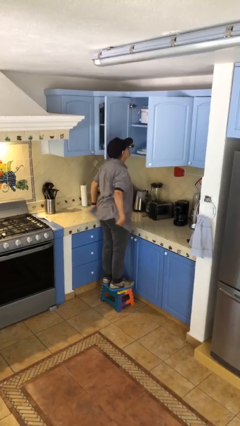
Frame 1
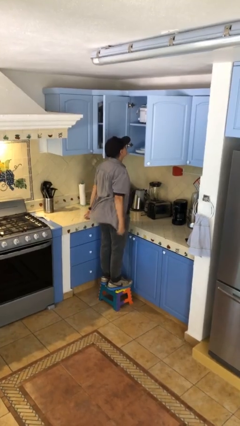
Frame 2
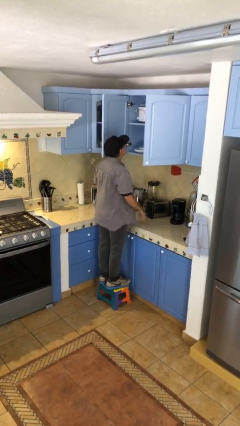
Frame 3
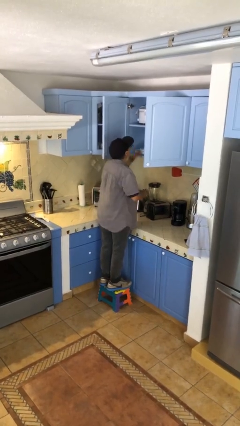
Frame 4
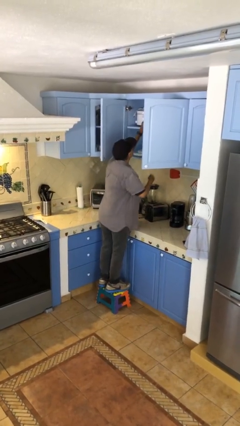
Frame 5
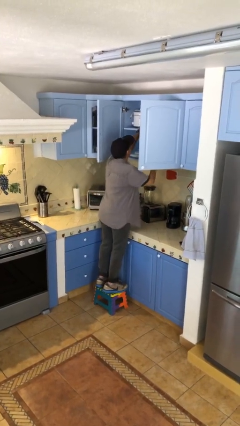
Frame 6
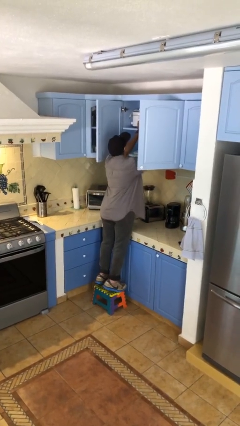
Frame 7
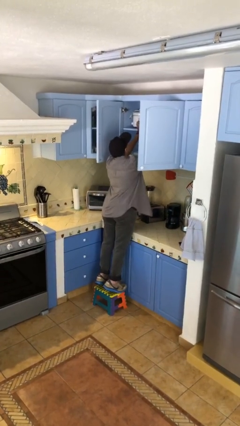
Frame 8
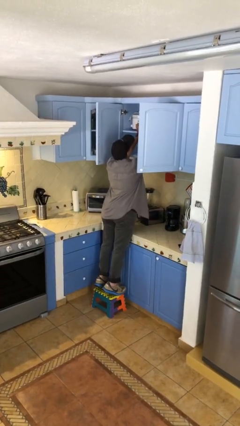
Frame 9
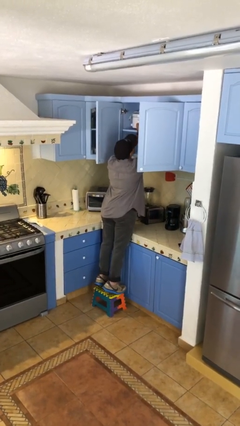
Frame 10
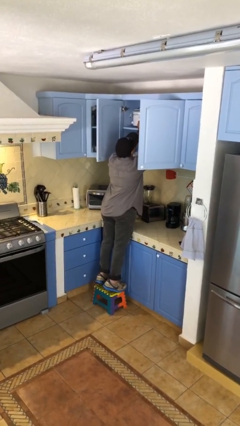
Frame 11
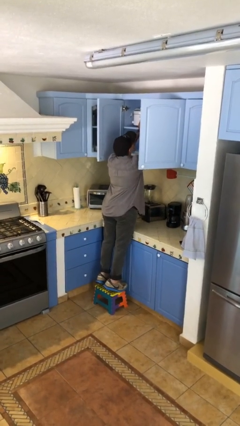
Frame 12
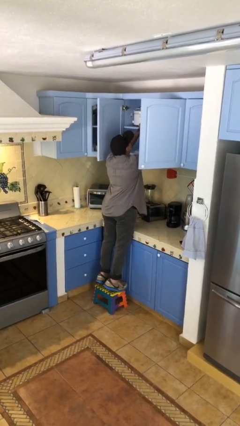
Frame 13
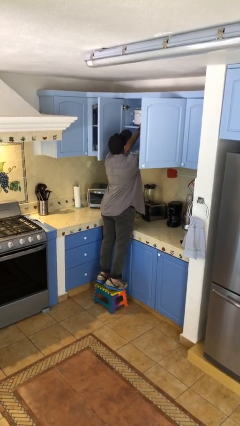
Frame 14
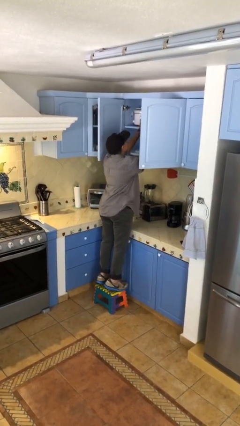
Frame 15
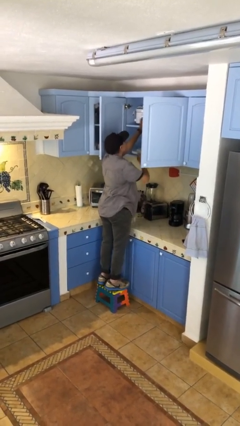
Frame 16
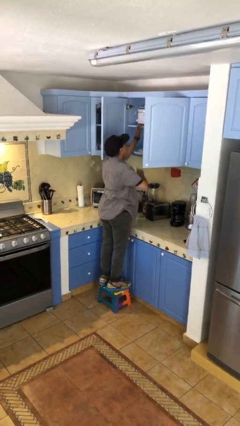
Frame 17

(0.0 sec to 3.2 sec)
person searches in cabinet

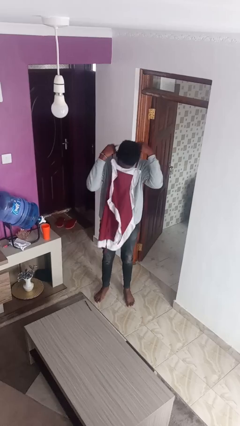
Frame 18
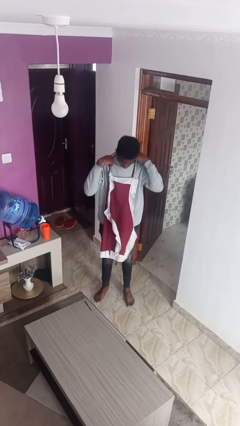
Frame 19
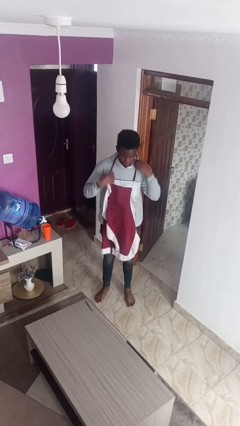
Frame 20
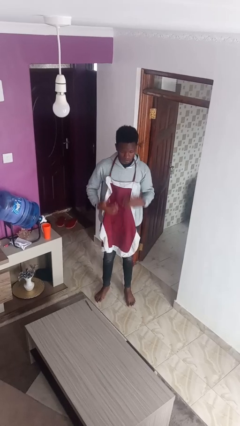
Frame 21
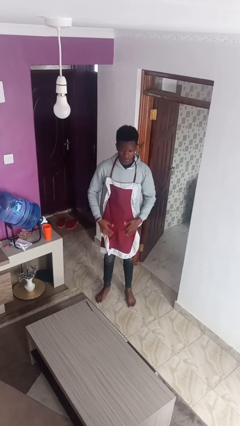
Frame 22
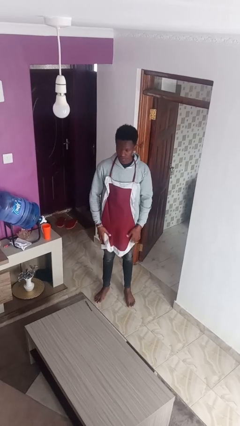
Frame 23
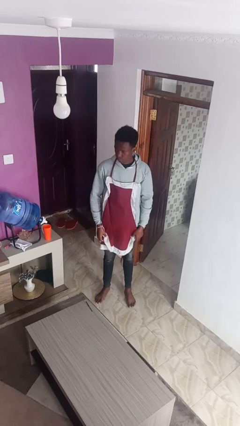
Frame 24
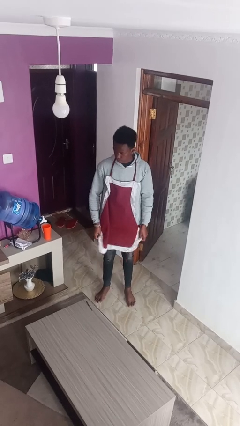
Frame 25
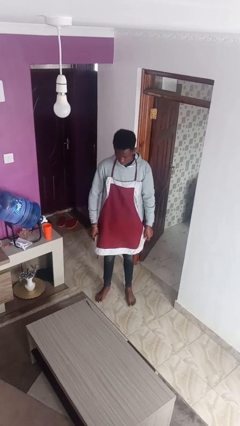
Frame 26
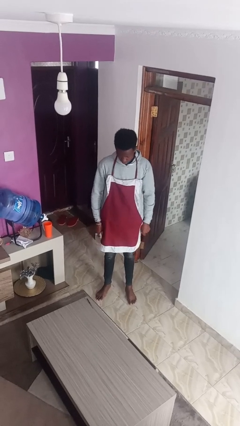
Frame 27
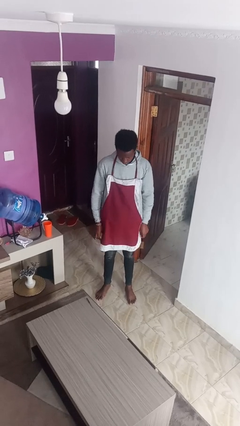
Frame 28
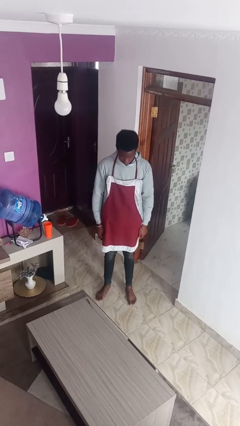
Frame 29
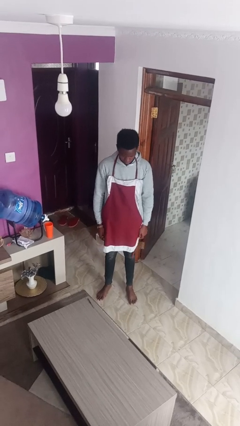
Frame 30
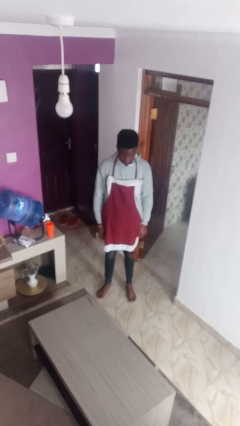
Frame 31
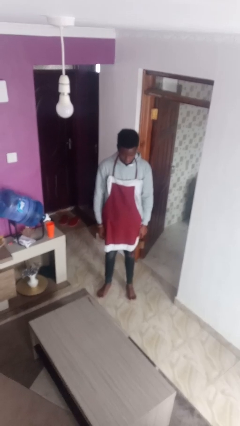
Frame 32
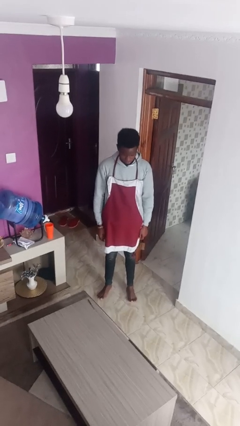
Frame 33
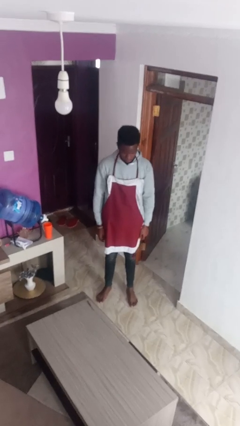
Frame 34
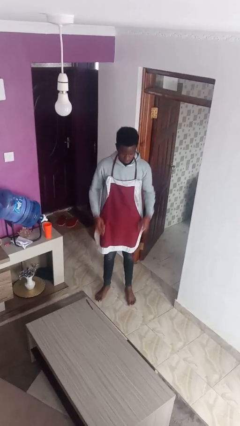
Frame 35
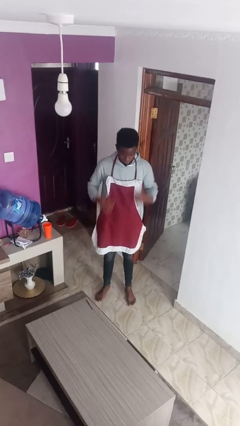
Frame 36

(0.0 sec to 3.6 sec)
person puts on apron

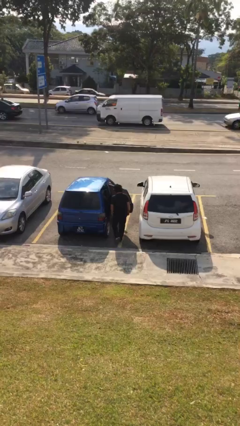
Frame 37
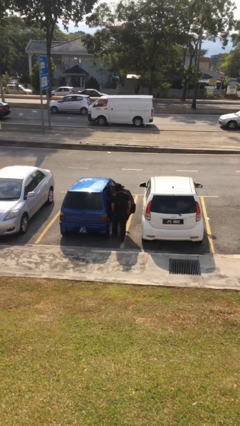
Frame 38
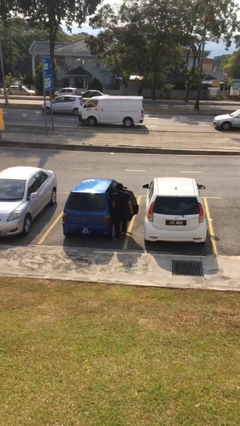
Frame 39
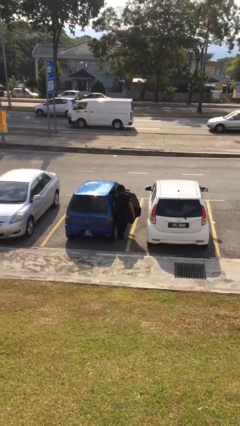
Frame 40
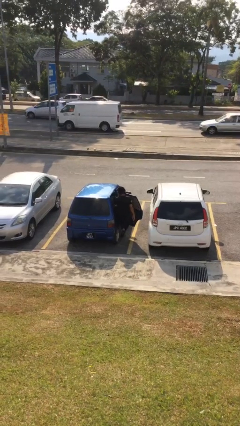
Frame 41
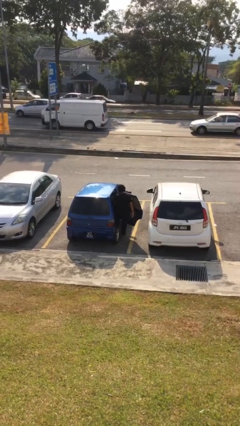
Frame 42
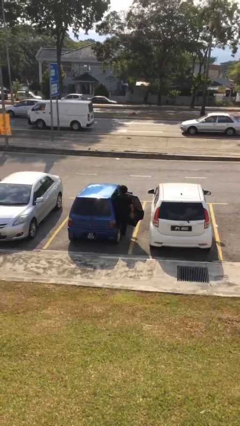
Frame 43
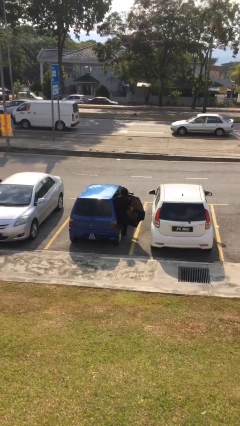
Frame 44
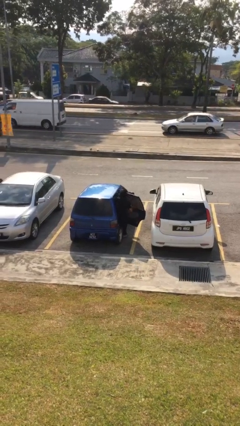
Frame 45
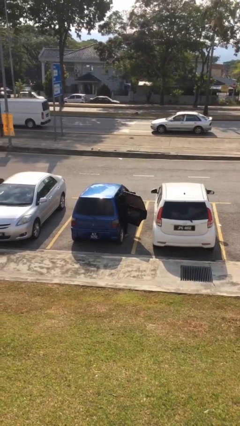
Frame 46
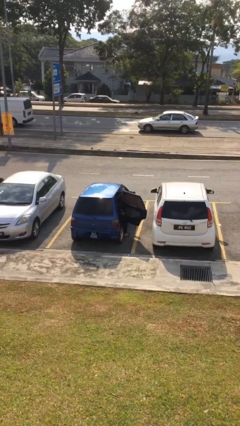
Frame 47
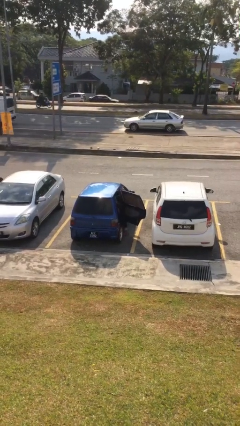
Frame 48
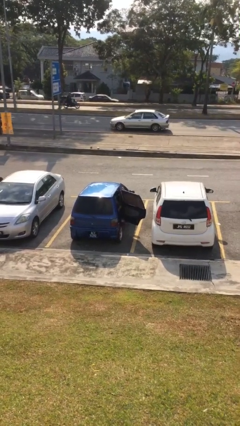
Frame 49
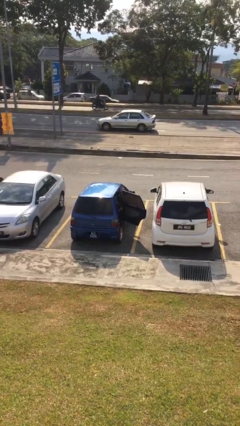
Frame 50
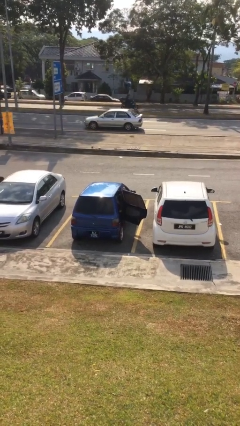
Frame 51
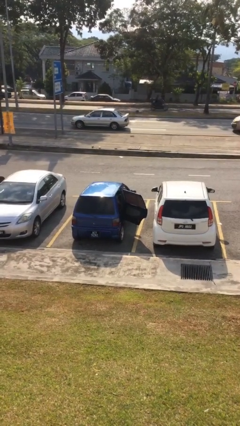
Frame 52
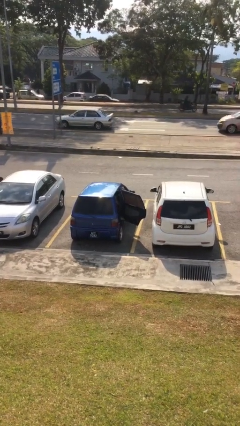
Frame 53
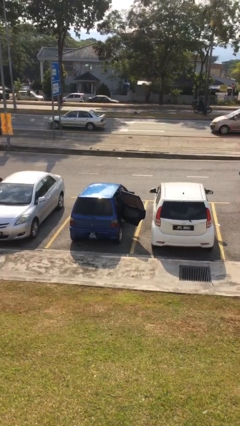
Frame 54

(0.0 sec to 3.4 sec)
person enters car

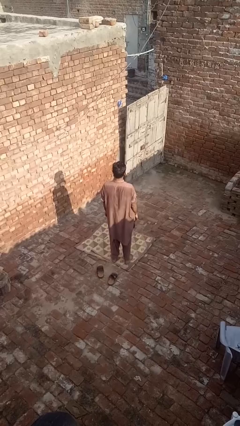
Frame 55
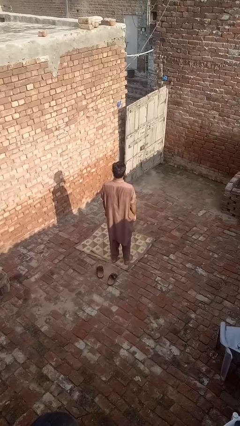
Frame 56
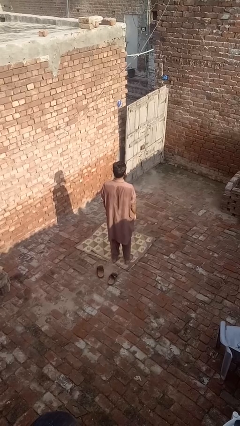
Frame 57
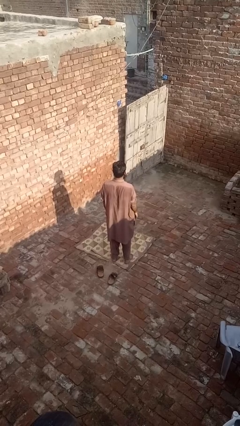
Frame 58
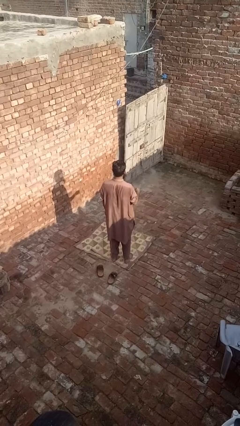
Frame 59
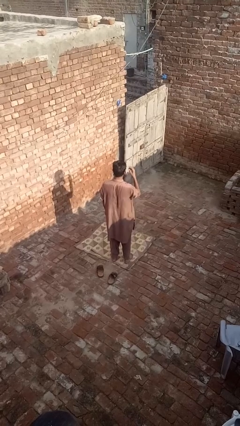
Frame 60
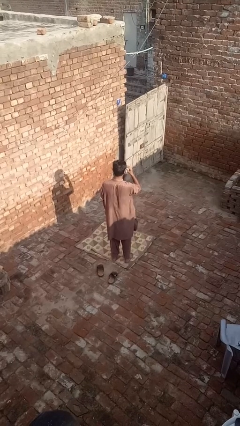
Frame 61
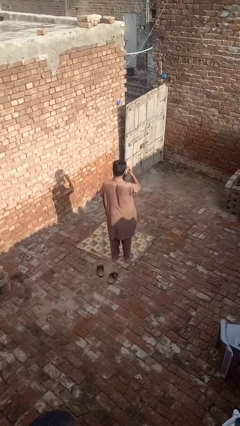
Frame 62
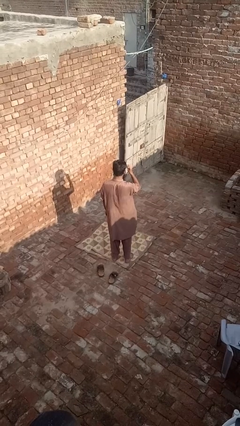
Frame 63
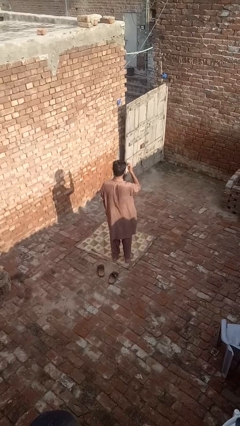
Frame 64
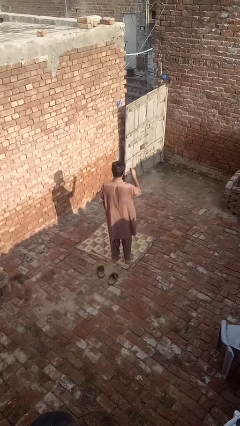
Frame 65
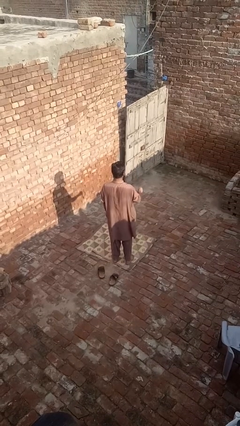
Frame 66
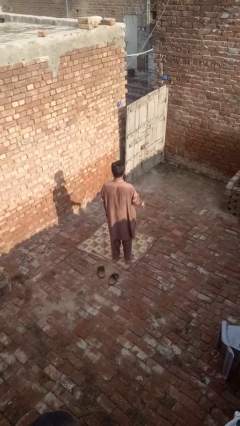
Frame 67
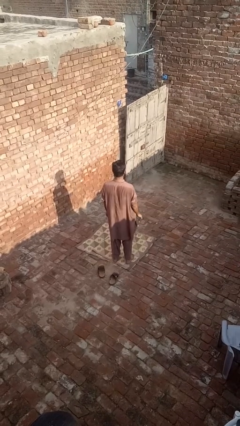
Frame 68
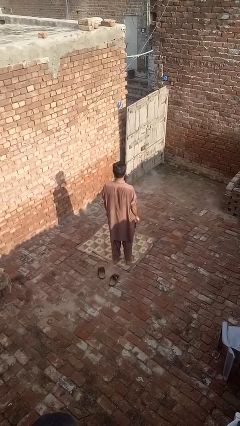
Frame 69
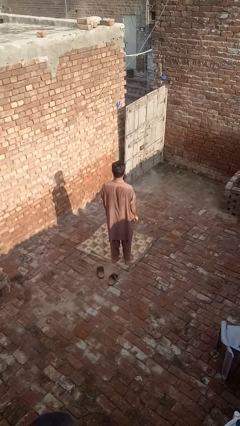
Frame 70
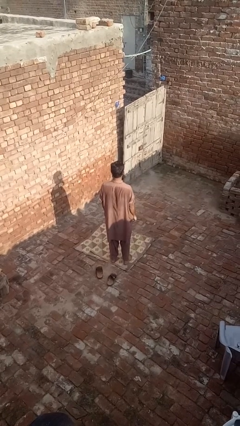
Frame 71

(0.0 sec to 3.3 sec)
person takes off glasses

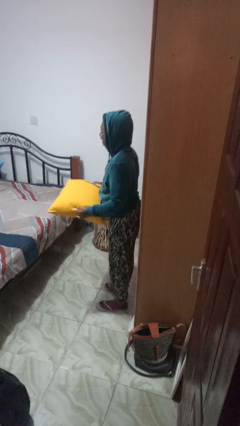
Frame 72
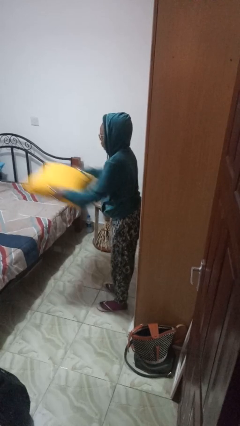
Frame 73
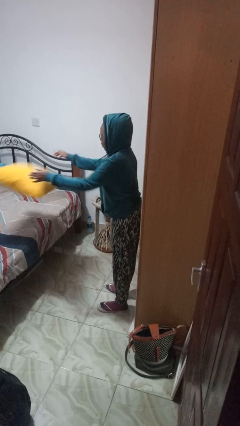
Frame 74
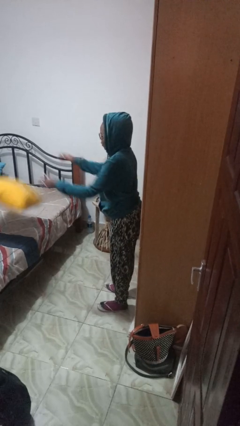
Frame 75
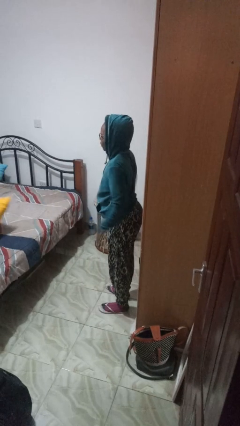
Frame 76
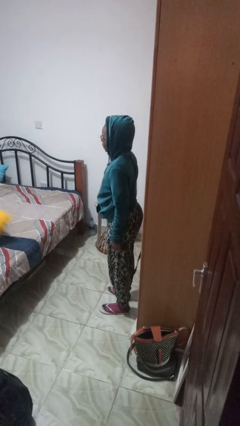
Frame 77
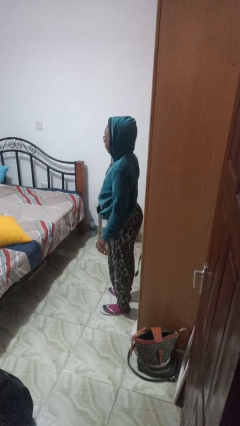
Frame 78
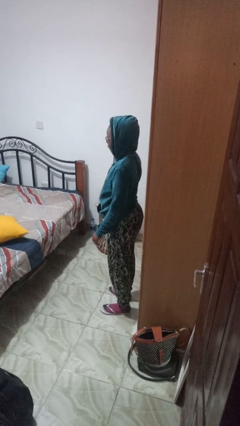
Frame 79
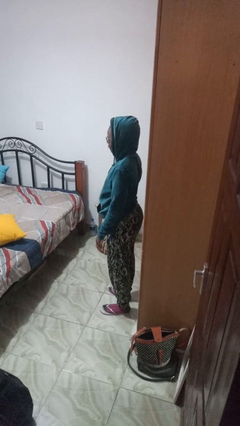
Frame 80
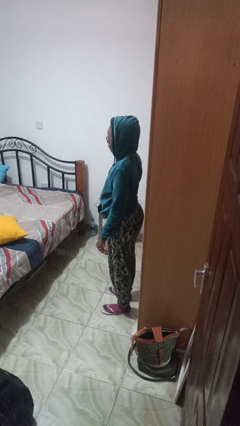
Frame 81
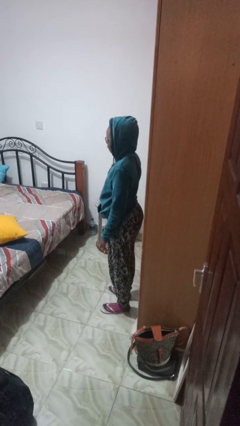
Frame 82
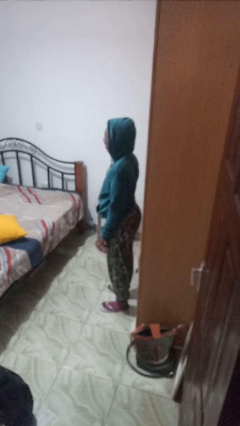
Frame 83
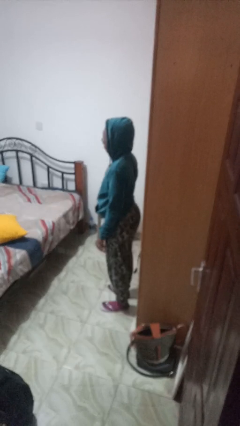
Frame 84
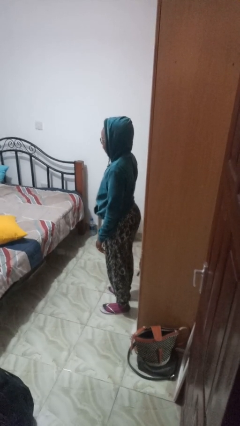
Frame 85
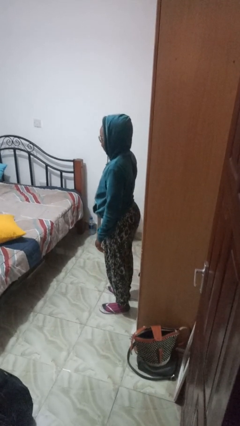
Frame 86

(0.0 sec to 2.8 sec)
person throws object on bed

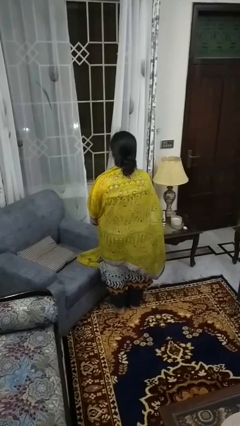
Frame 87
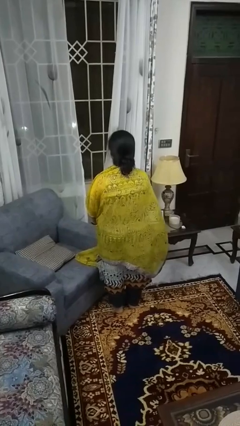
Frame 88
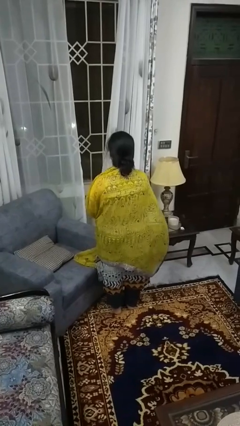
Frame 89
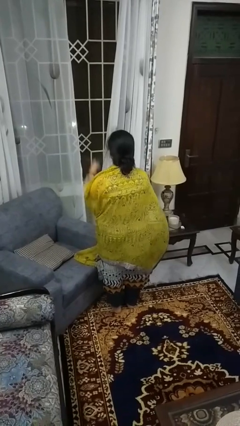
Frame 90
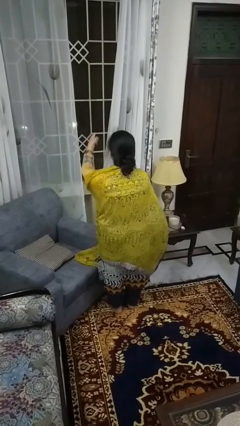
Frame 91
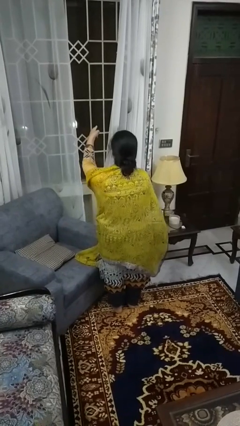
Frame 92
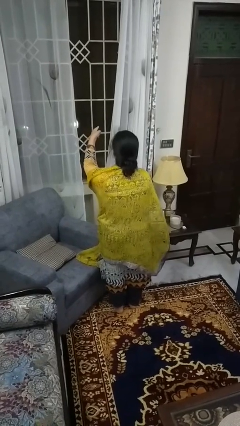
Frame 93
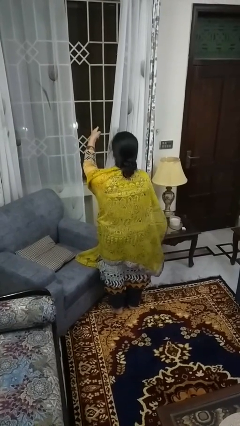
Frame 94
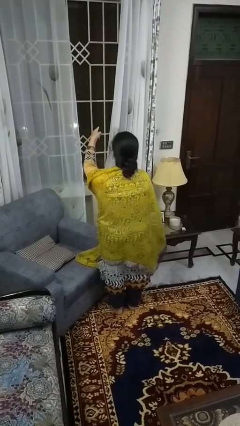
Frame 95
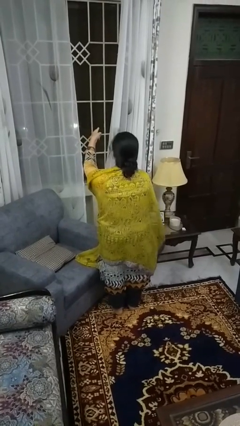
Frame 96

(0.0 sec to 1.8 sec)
person points at person
